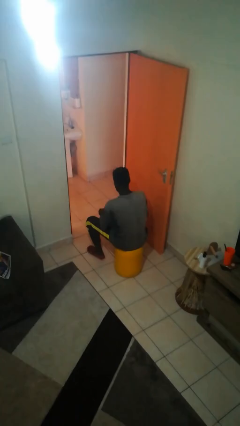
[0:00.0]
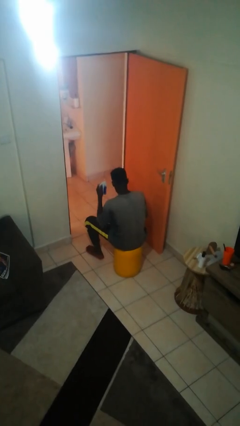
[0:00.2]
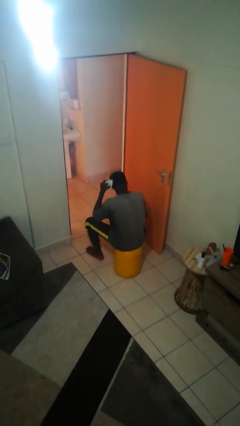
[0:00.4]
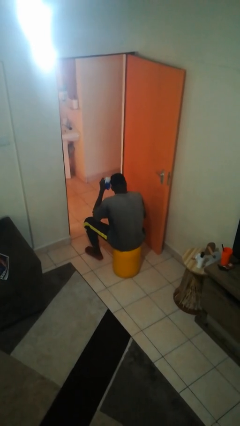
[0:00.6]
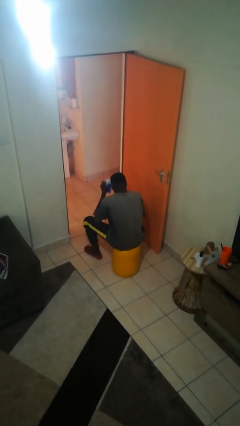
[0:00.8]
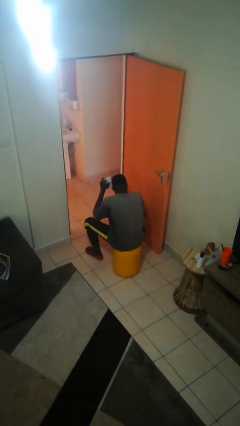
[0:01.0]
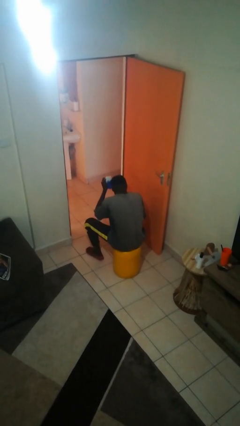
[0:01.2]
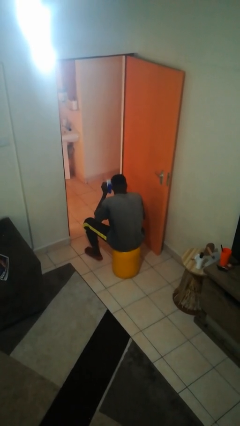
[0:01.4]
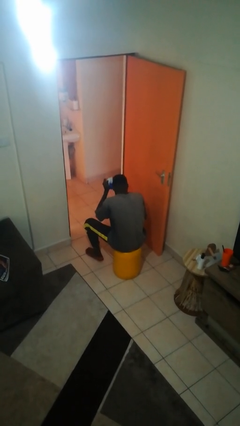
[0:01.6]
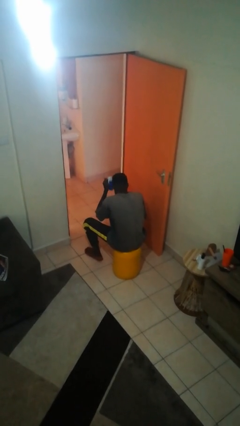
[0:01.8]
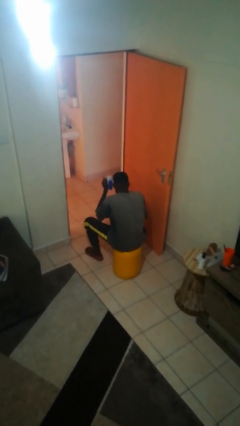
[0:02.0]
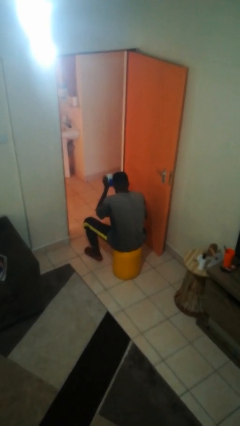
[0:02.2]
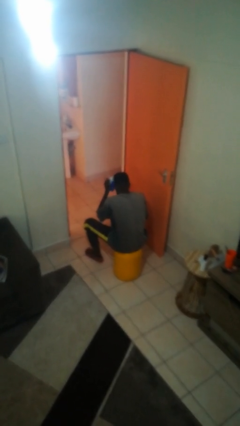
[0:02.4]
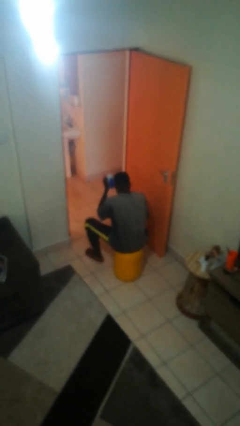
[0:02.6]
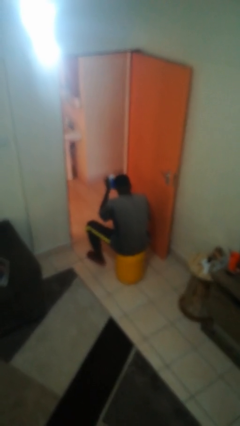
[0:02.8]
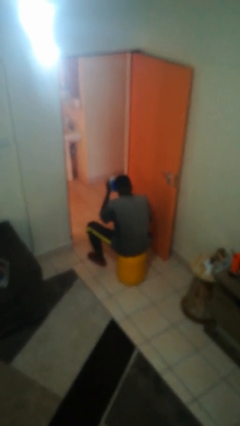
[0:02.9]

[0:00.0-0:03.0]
person brushes hair

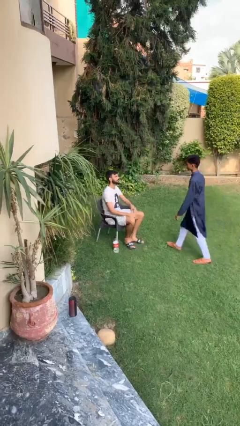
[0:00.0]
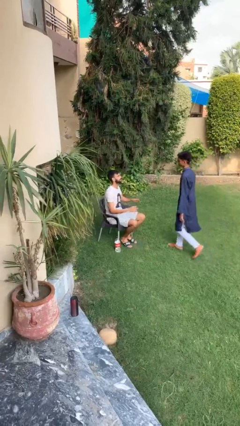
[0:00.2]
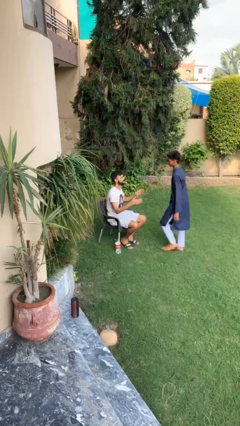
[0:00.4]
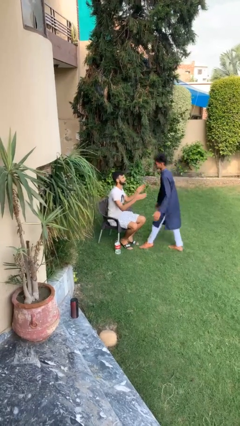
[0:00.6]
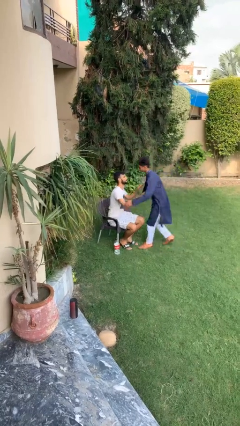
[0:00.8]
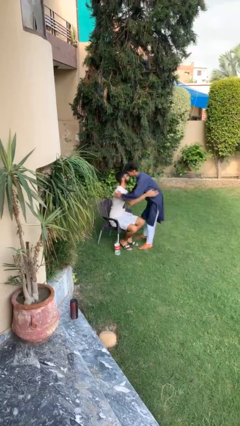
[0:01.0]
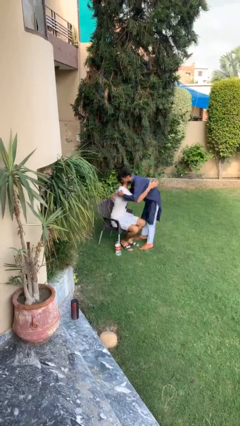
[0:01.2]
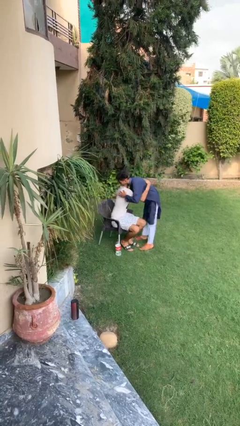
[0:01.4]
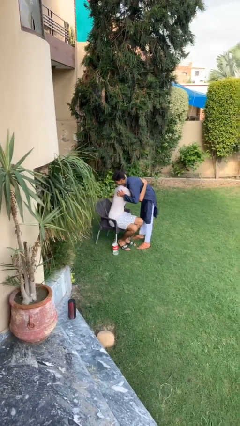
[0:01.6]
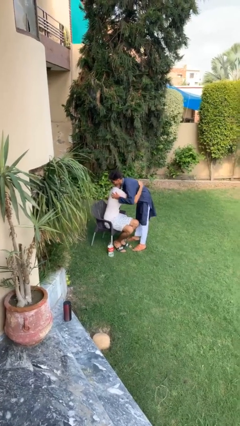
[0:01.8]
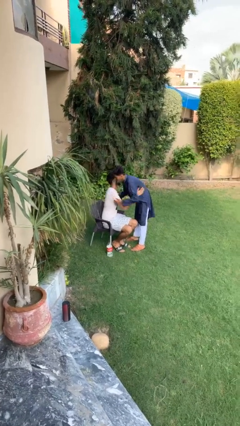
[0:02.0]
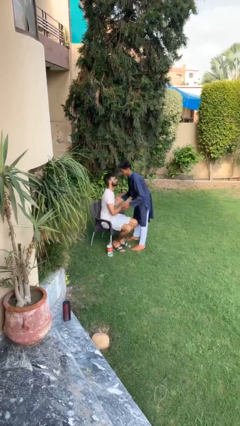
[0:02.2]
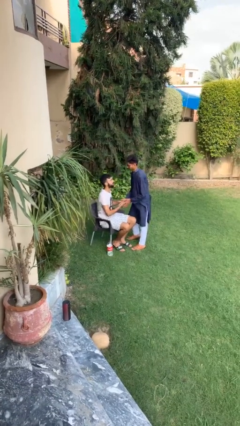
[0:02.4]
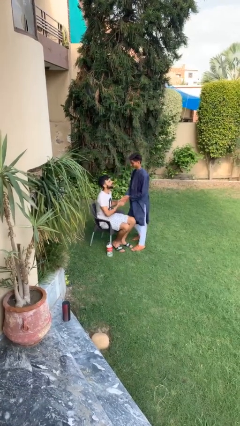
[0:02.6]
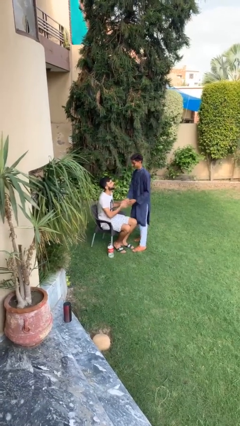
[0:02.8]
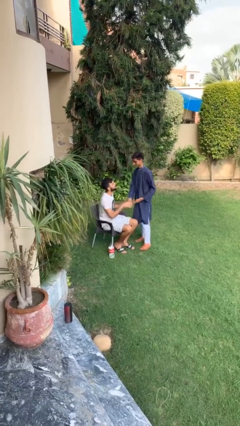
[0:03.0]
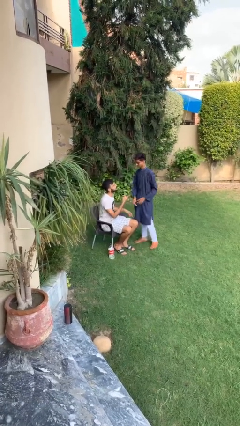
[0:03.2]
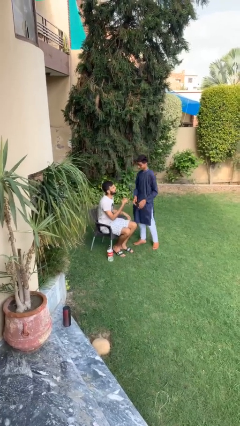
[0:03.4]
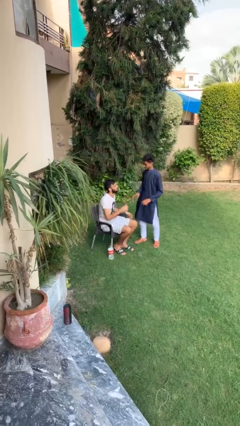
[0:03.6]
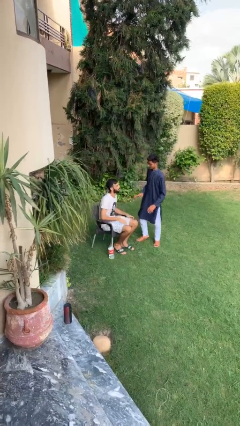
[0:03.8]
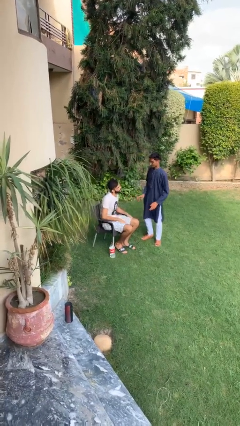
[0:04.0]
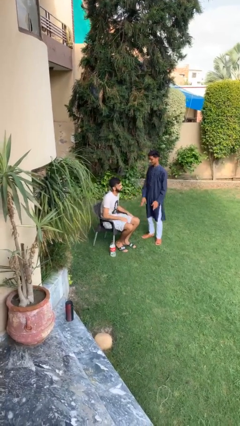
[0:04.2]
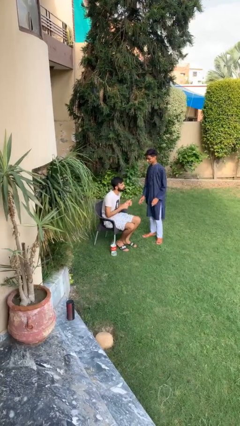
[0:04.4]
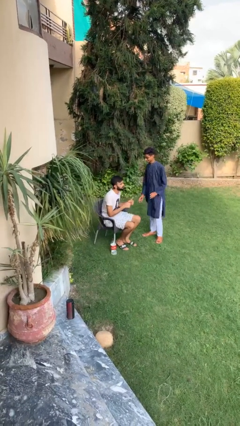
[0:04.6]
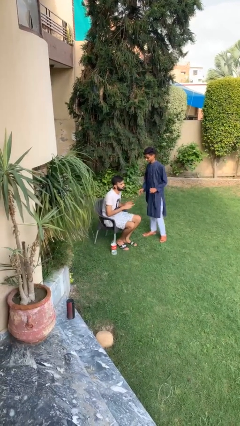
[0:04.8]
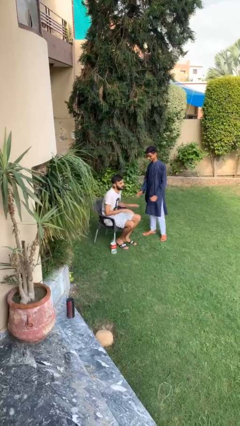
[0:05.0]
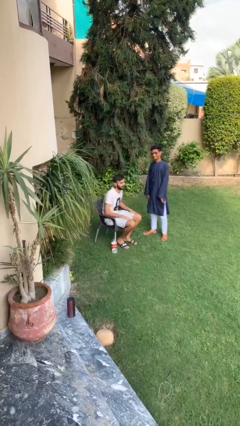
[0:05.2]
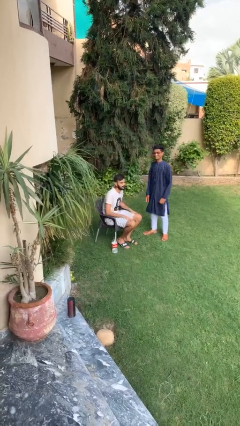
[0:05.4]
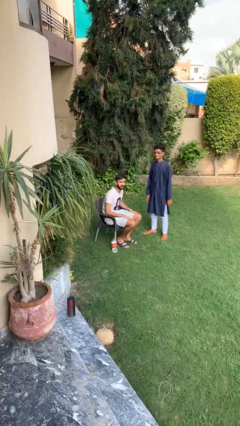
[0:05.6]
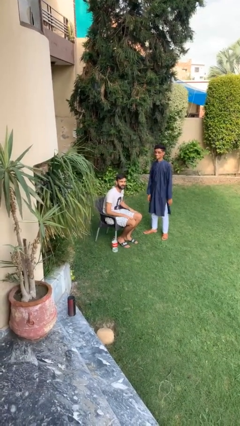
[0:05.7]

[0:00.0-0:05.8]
person embraces person

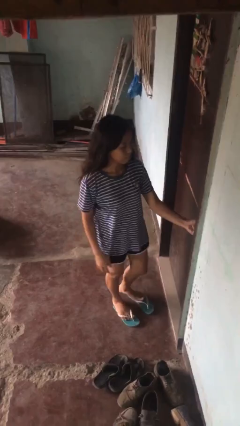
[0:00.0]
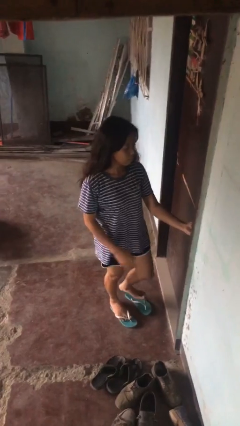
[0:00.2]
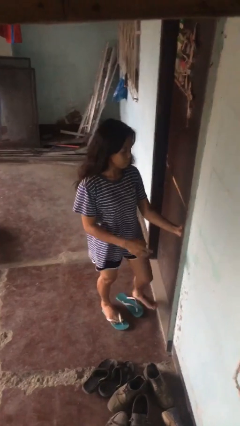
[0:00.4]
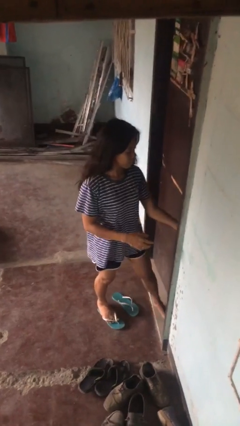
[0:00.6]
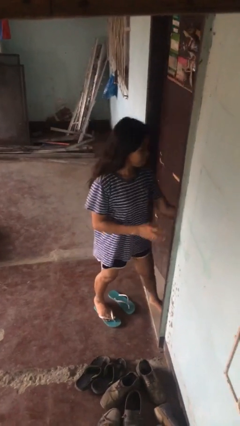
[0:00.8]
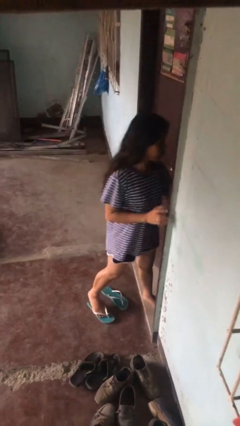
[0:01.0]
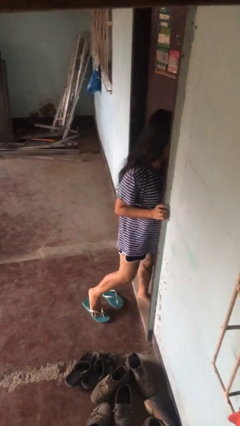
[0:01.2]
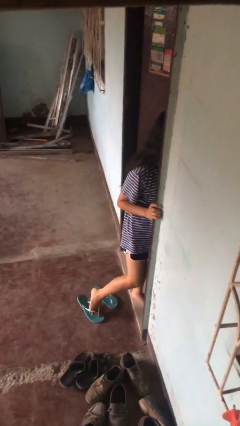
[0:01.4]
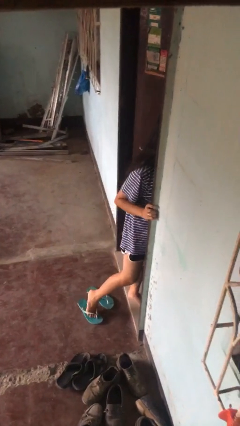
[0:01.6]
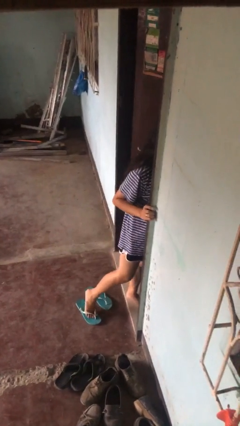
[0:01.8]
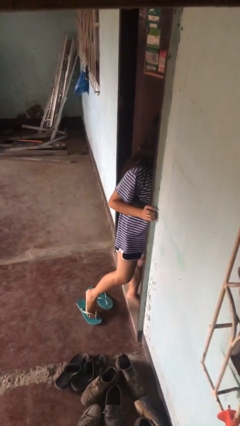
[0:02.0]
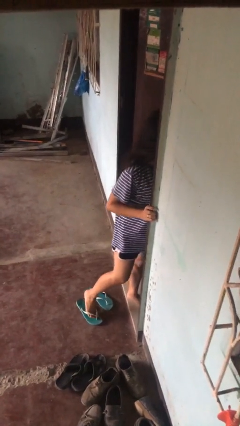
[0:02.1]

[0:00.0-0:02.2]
person opens facility door

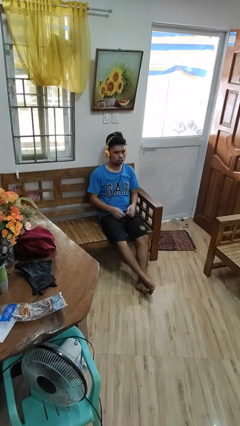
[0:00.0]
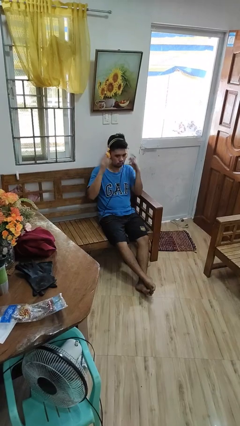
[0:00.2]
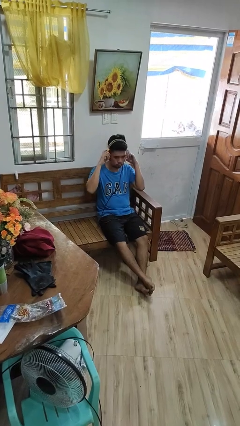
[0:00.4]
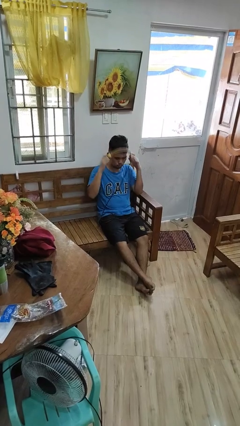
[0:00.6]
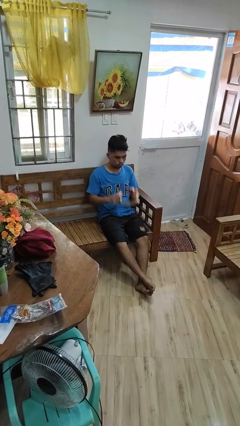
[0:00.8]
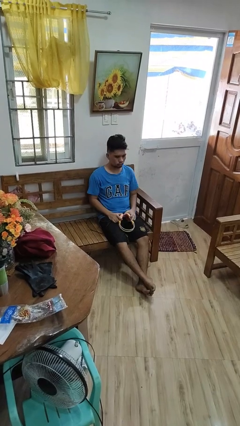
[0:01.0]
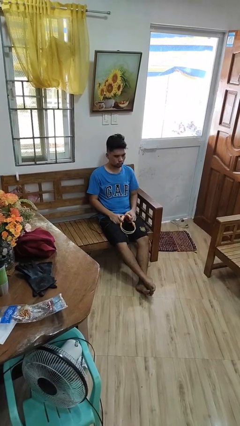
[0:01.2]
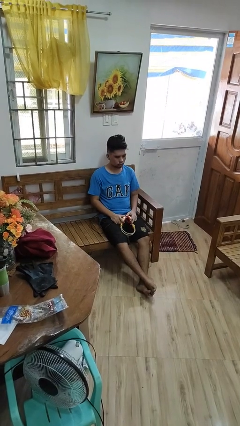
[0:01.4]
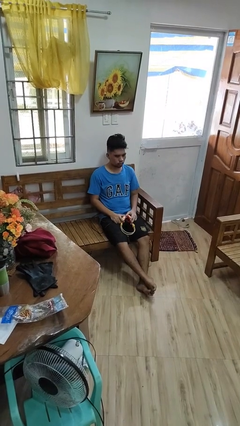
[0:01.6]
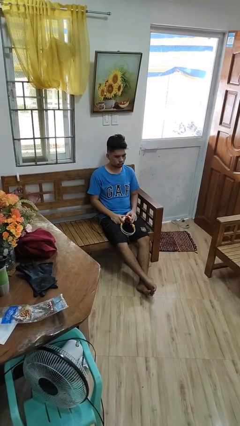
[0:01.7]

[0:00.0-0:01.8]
person takes off headphones

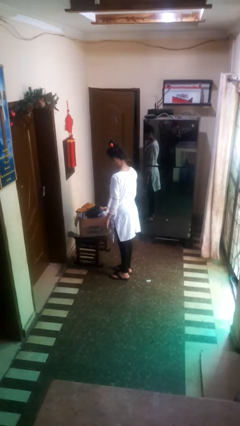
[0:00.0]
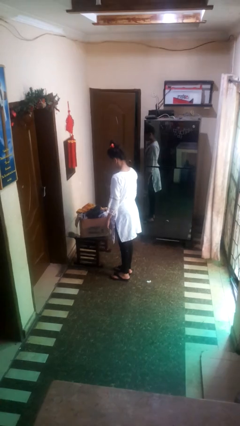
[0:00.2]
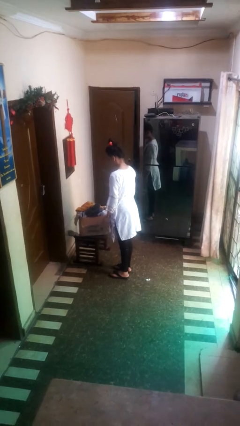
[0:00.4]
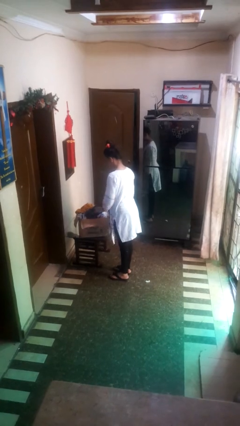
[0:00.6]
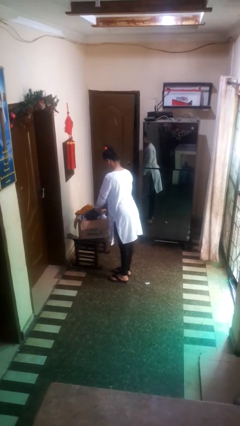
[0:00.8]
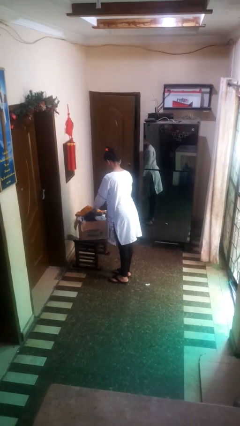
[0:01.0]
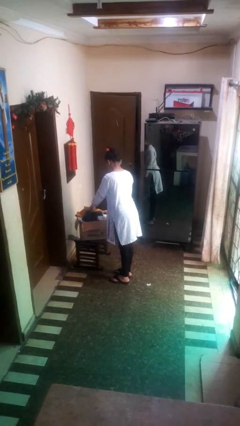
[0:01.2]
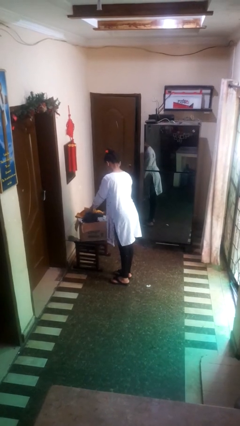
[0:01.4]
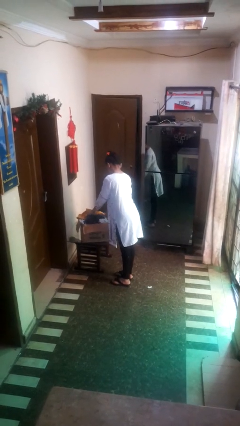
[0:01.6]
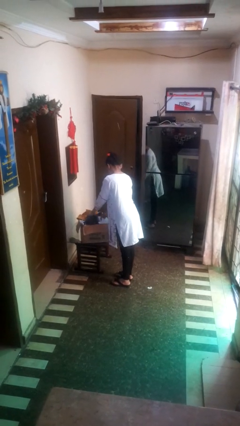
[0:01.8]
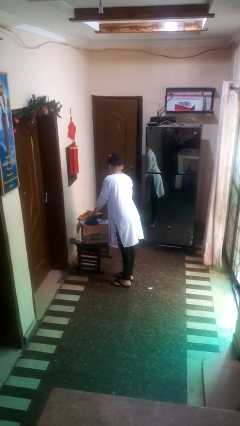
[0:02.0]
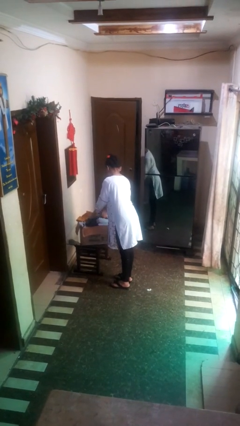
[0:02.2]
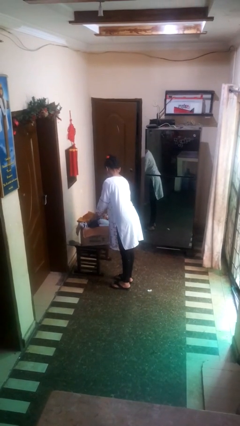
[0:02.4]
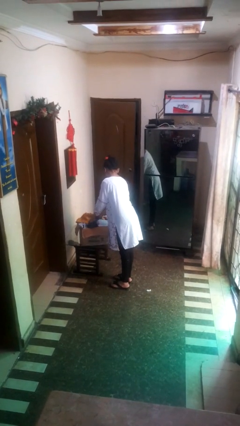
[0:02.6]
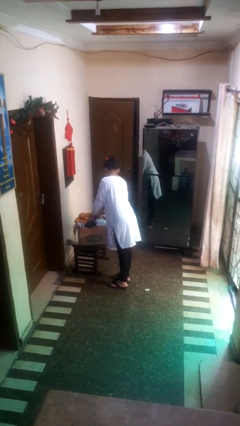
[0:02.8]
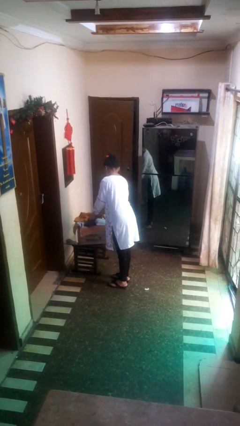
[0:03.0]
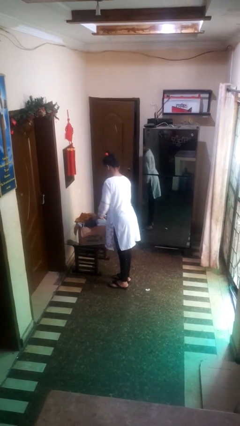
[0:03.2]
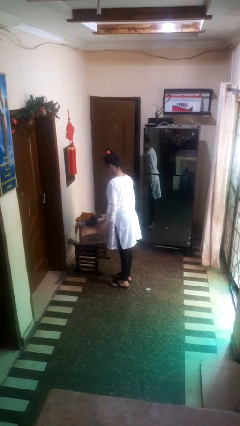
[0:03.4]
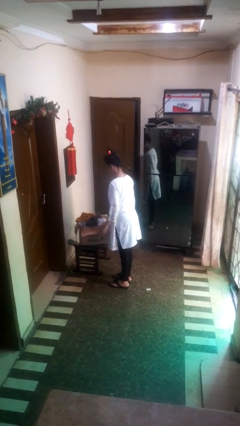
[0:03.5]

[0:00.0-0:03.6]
person searches in box

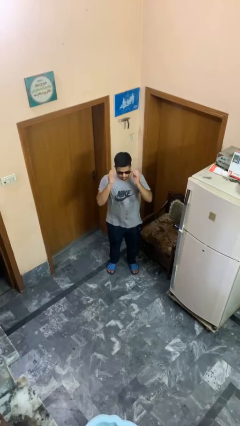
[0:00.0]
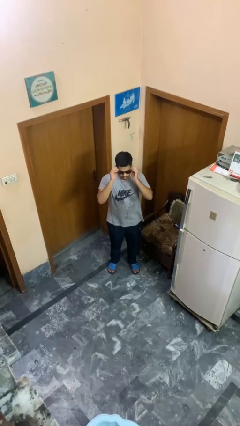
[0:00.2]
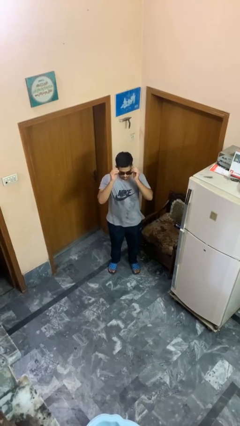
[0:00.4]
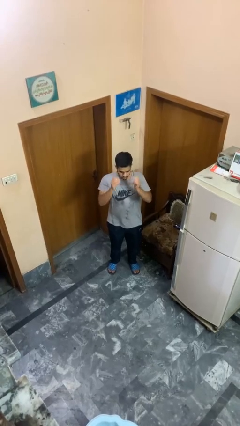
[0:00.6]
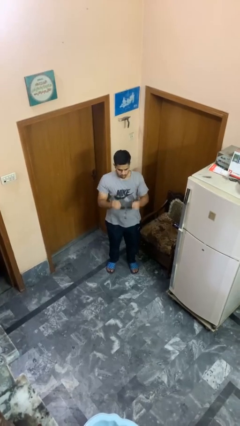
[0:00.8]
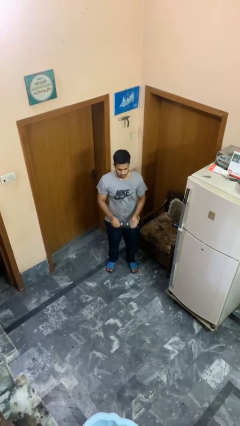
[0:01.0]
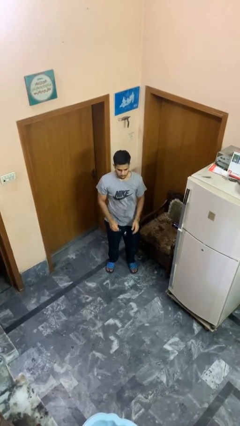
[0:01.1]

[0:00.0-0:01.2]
person takes off sunglasses
